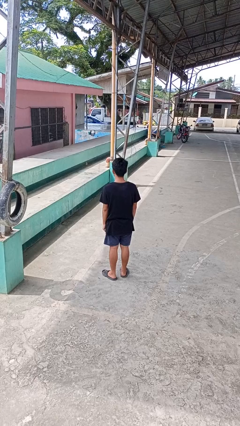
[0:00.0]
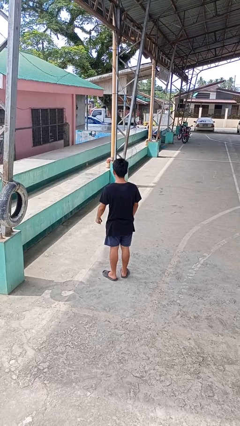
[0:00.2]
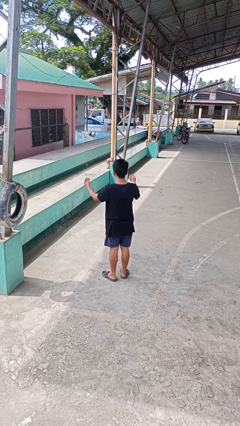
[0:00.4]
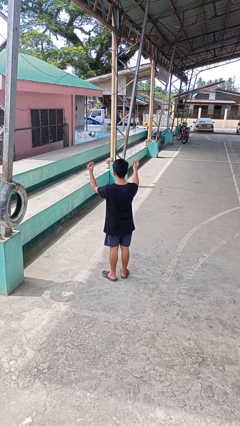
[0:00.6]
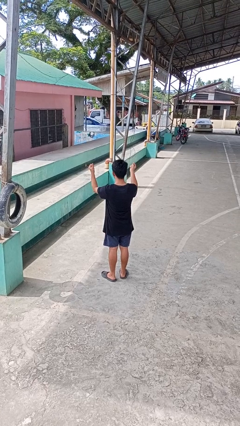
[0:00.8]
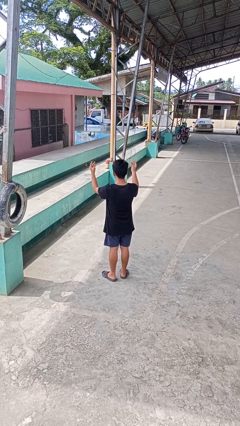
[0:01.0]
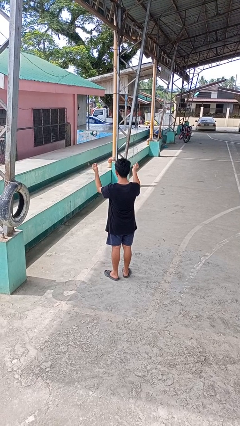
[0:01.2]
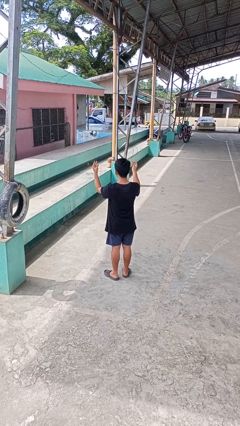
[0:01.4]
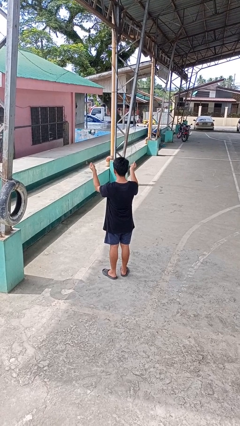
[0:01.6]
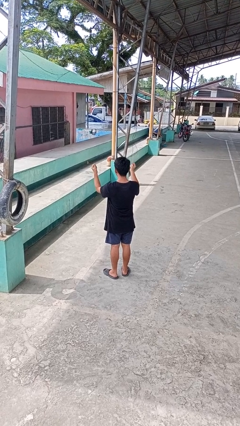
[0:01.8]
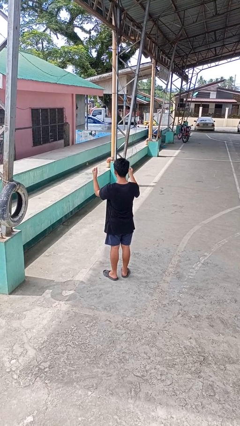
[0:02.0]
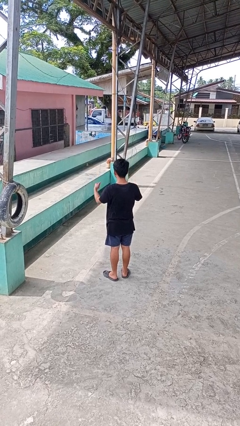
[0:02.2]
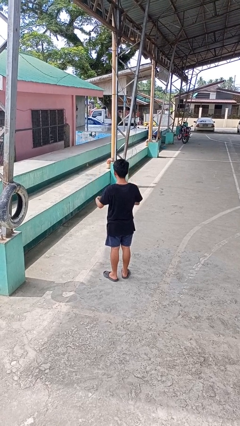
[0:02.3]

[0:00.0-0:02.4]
person snaps fingers

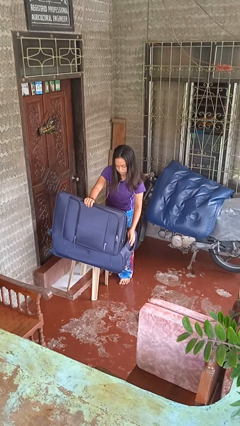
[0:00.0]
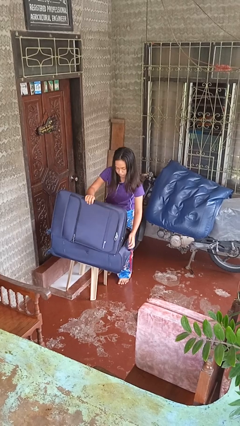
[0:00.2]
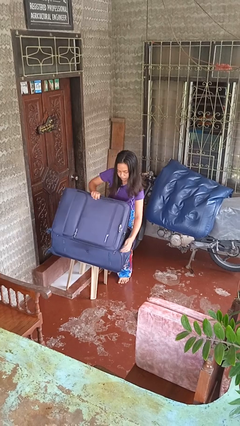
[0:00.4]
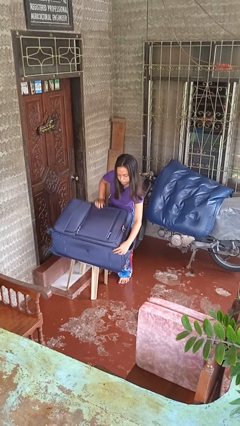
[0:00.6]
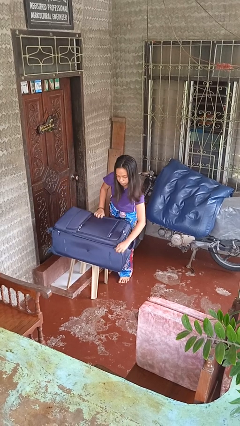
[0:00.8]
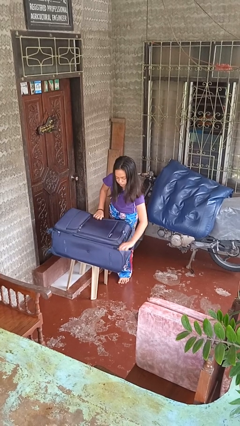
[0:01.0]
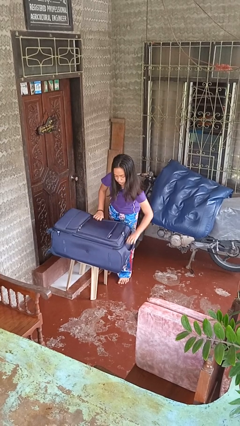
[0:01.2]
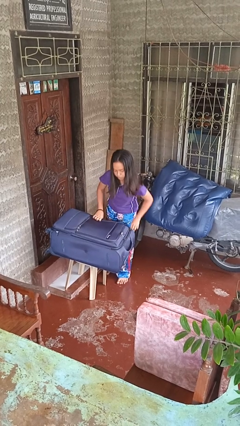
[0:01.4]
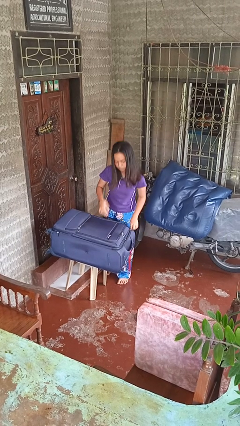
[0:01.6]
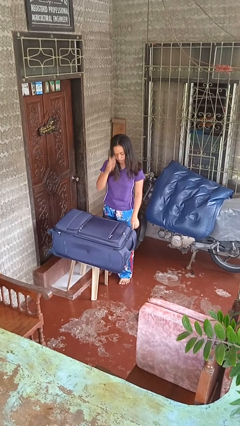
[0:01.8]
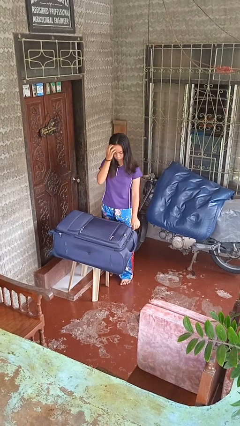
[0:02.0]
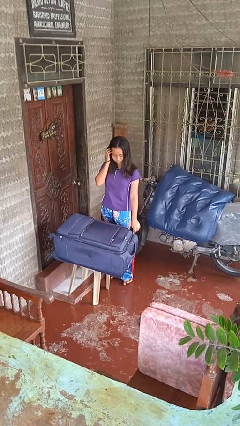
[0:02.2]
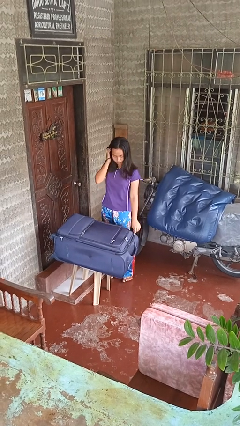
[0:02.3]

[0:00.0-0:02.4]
person closes suitcase

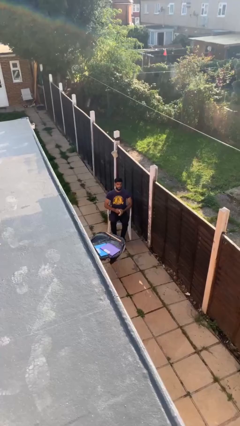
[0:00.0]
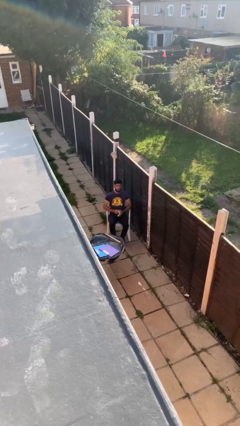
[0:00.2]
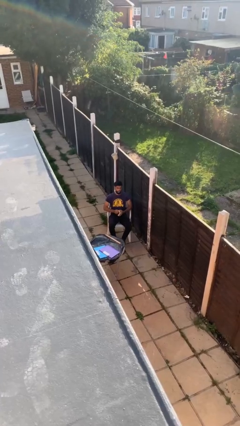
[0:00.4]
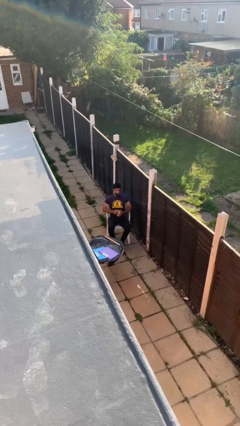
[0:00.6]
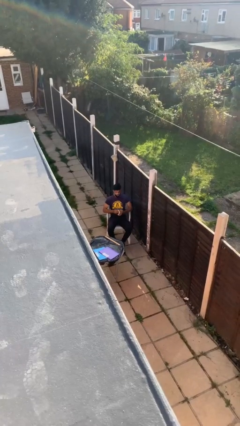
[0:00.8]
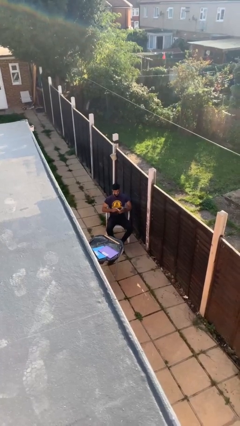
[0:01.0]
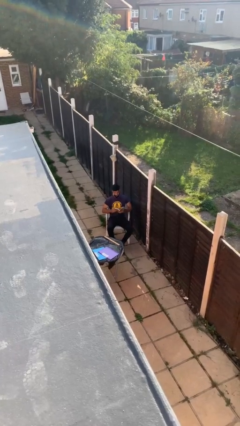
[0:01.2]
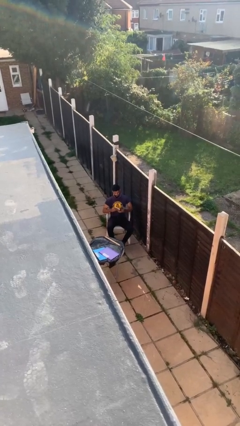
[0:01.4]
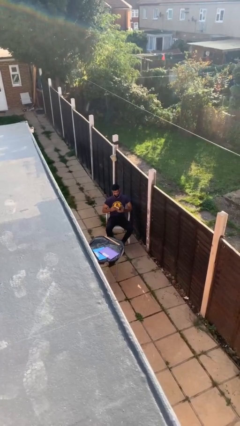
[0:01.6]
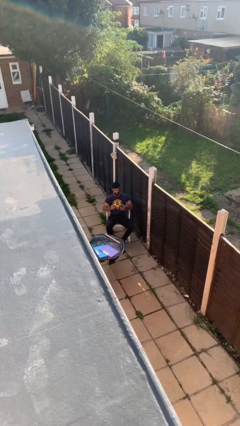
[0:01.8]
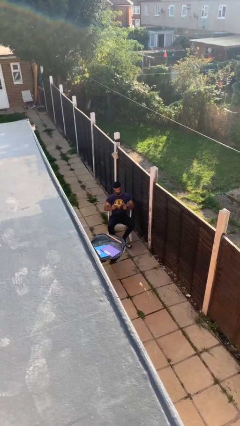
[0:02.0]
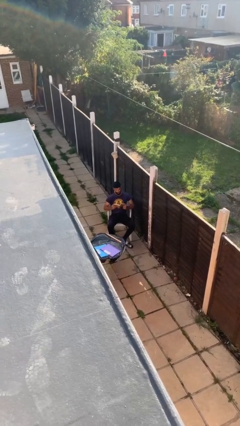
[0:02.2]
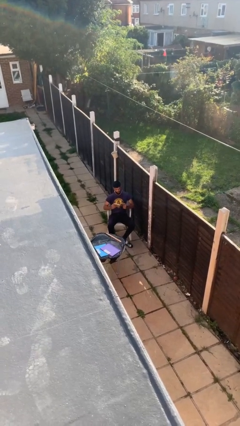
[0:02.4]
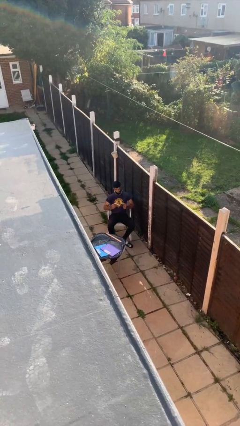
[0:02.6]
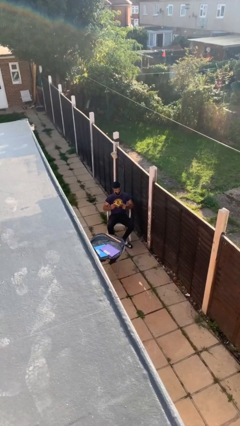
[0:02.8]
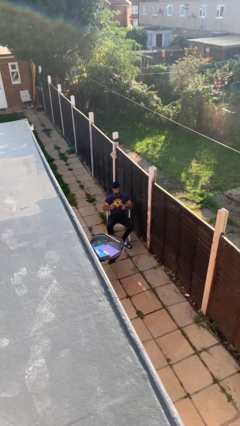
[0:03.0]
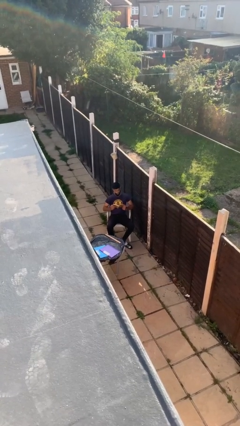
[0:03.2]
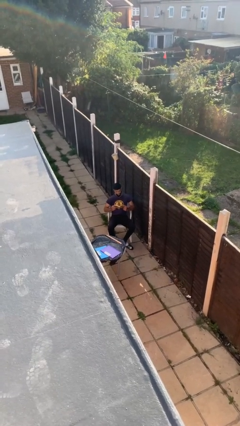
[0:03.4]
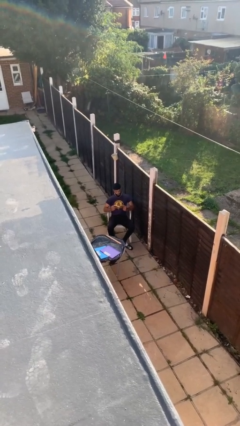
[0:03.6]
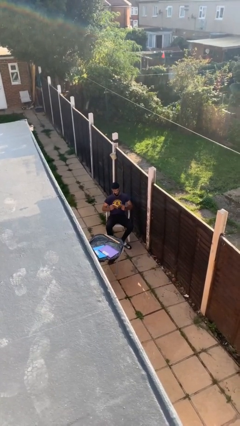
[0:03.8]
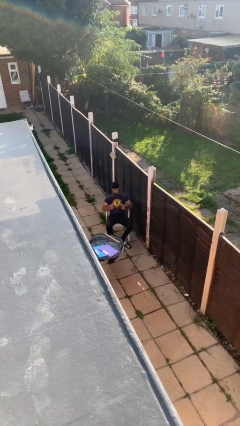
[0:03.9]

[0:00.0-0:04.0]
person reads document

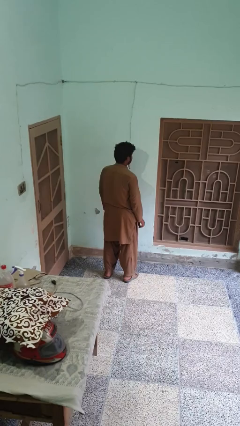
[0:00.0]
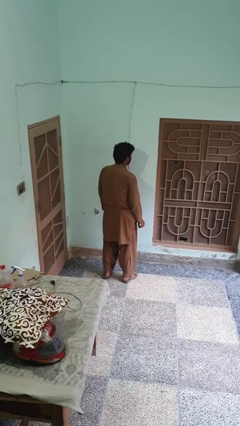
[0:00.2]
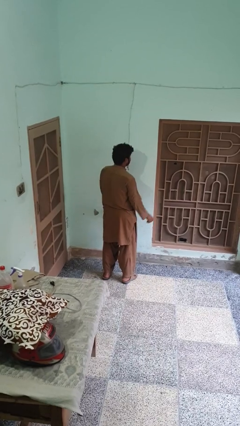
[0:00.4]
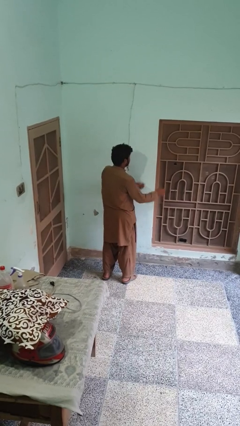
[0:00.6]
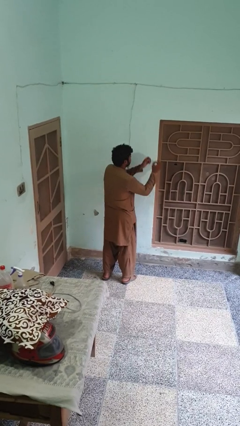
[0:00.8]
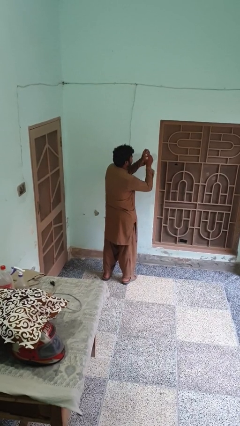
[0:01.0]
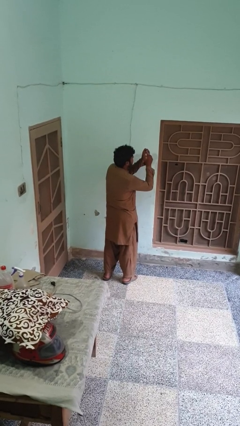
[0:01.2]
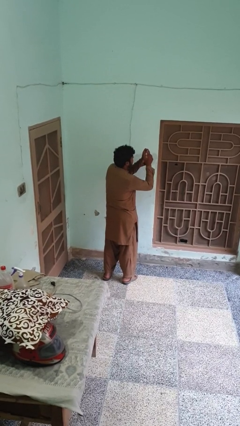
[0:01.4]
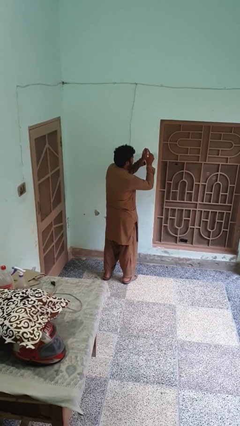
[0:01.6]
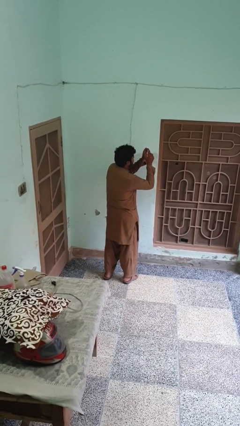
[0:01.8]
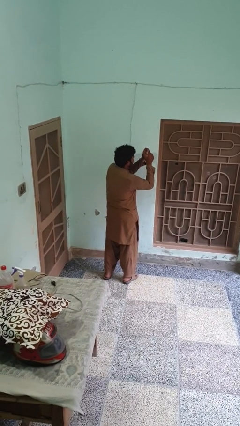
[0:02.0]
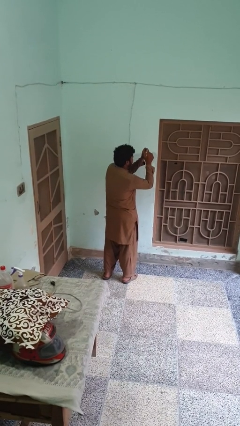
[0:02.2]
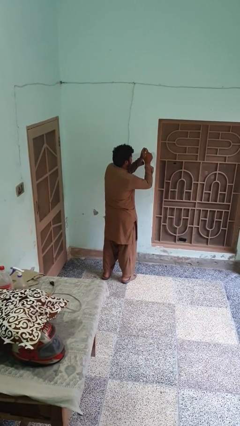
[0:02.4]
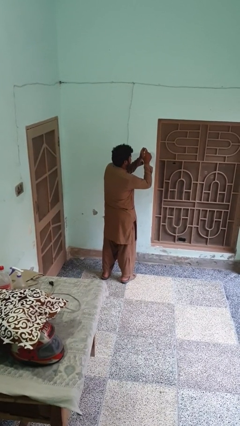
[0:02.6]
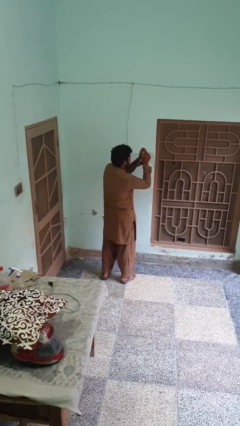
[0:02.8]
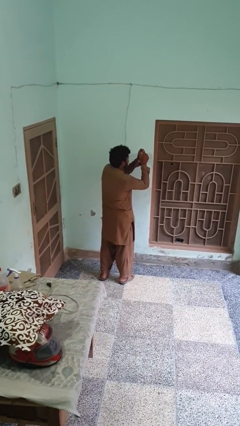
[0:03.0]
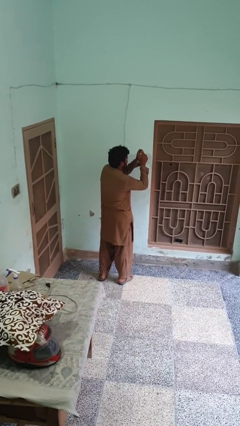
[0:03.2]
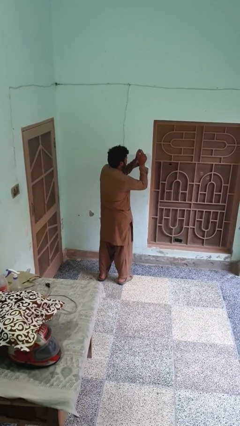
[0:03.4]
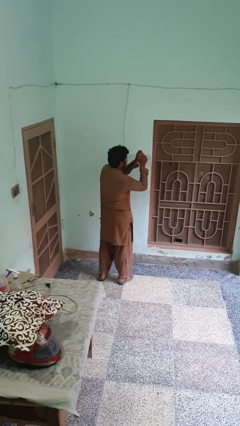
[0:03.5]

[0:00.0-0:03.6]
person paints fingernails

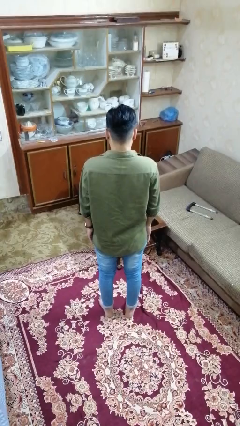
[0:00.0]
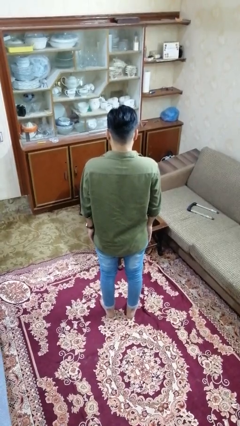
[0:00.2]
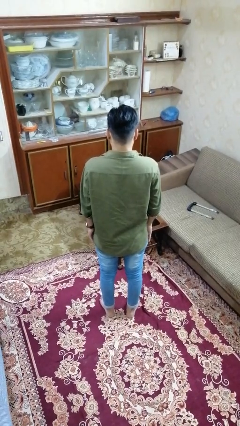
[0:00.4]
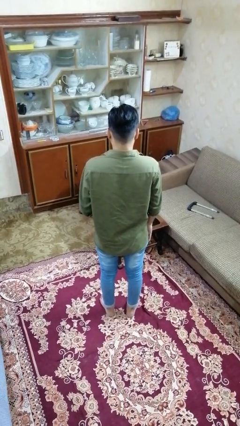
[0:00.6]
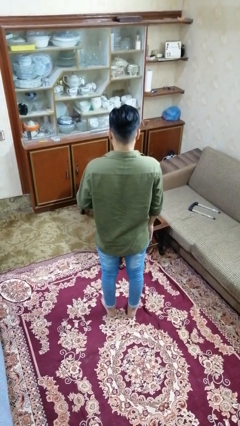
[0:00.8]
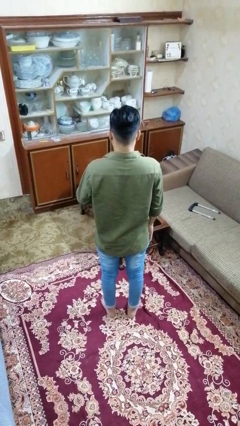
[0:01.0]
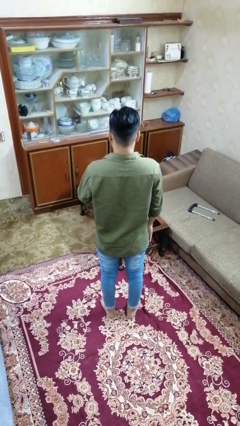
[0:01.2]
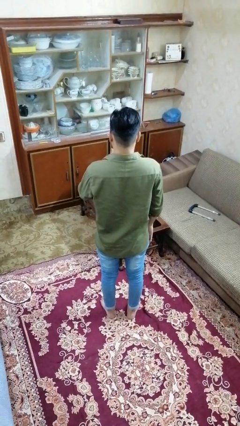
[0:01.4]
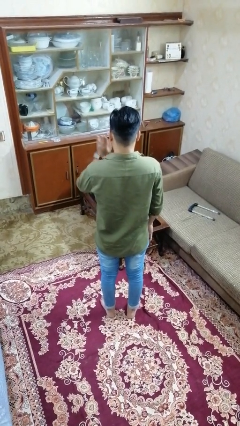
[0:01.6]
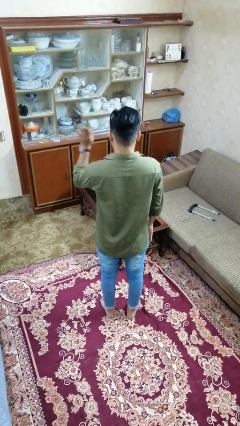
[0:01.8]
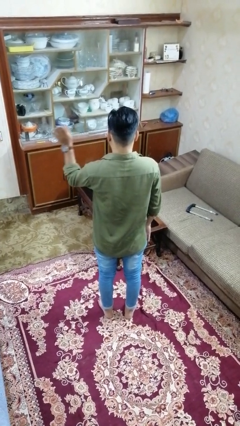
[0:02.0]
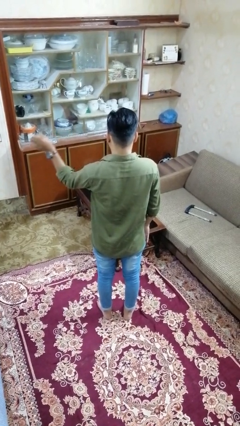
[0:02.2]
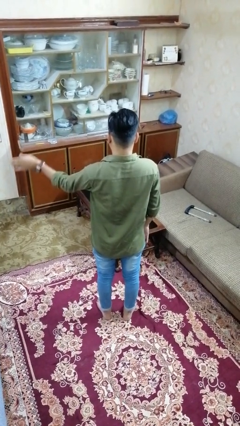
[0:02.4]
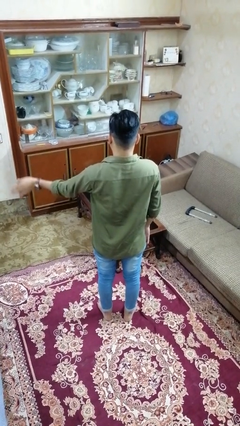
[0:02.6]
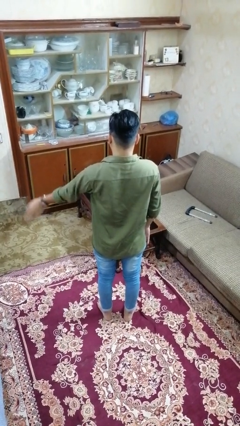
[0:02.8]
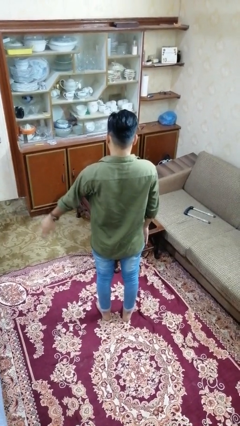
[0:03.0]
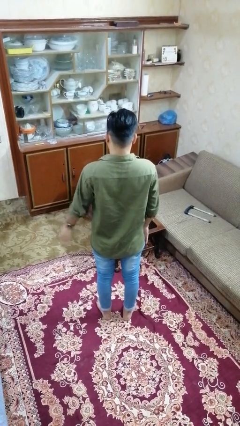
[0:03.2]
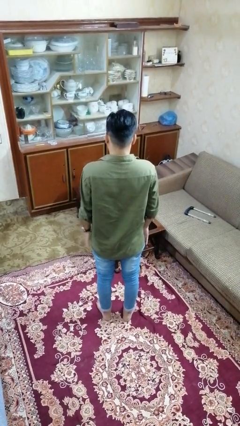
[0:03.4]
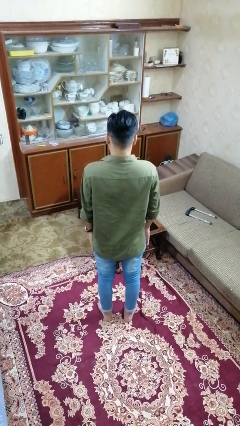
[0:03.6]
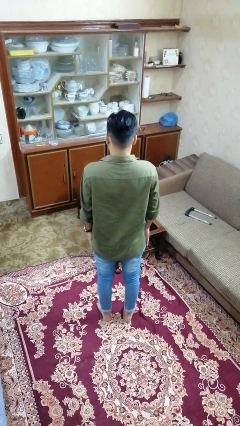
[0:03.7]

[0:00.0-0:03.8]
person gestures swipe left

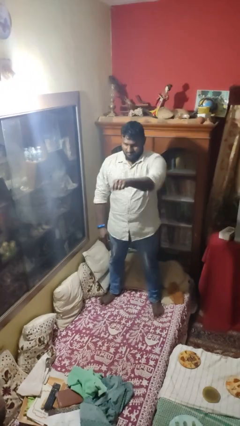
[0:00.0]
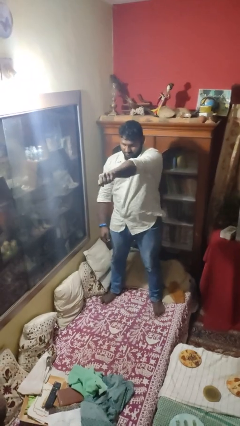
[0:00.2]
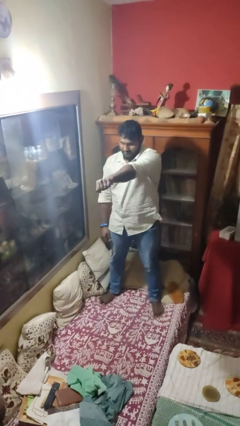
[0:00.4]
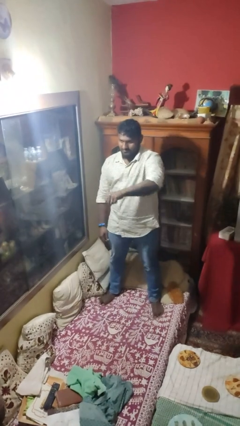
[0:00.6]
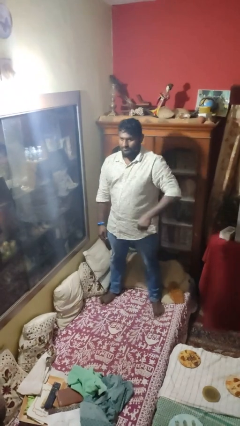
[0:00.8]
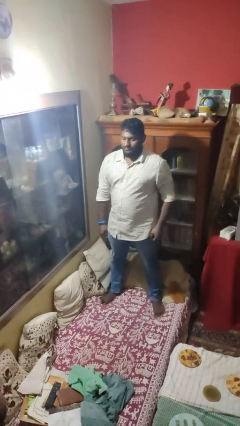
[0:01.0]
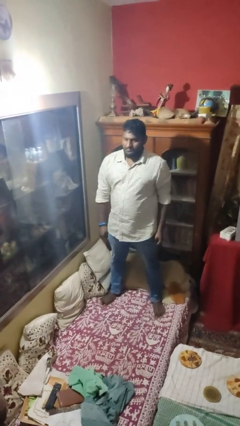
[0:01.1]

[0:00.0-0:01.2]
person punches
